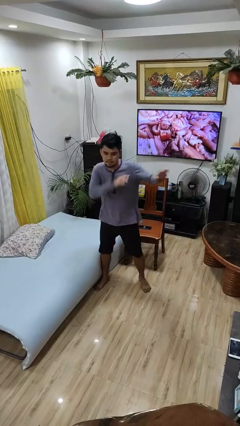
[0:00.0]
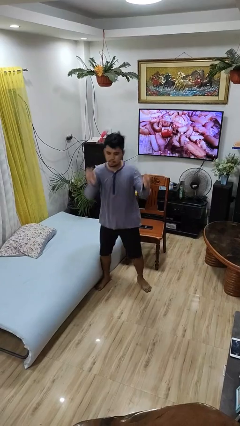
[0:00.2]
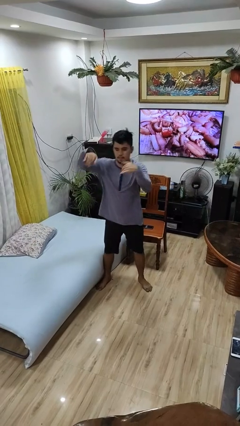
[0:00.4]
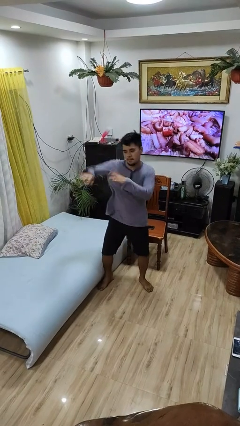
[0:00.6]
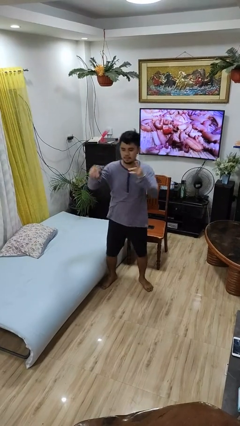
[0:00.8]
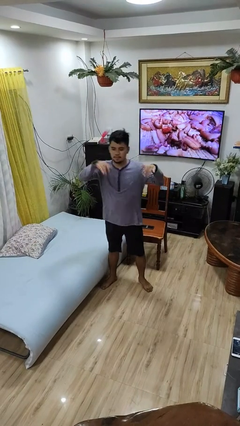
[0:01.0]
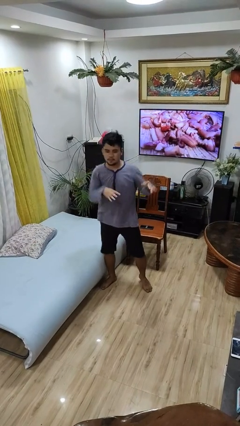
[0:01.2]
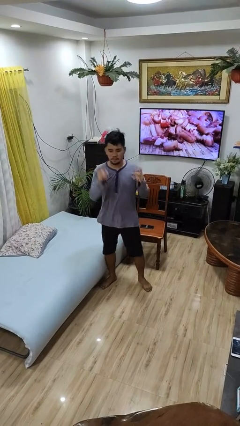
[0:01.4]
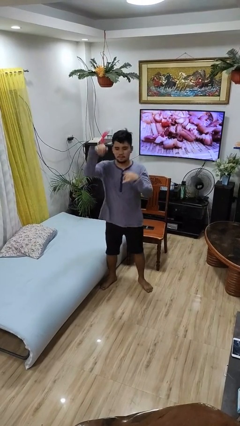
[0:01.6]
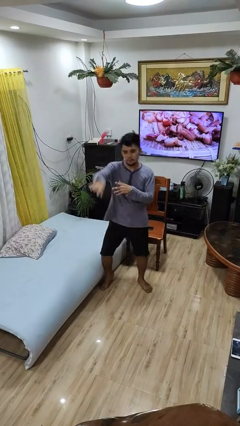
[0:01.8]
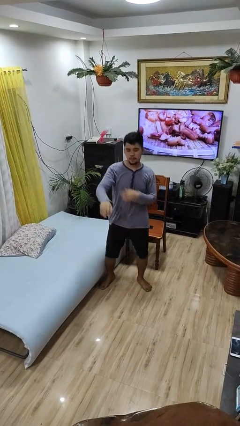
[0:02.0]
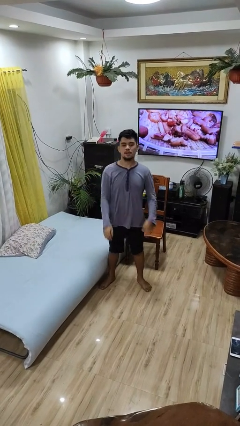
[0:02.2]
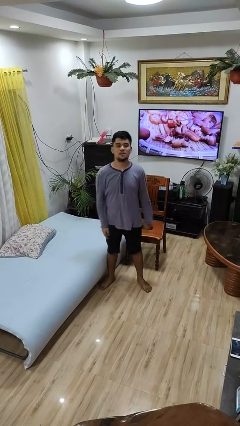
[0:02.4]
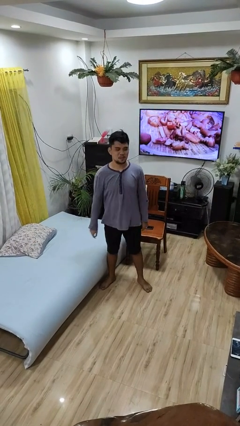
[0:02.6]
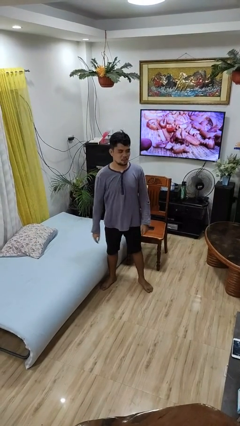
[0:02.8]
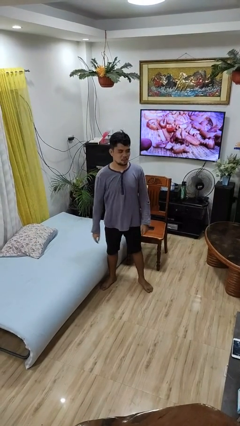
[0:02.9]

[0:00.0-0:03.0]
person dances in place

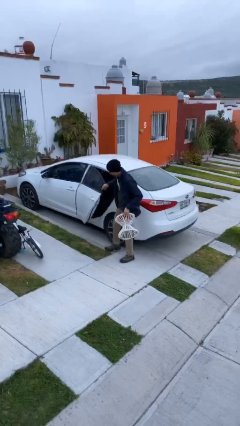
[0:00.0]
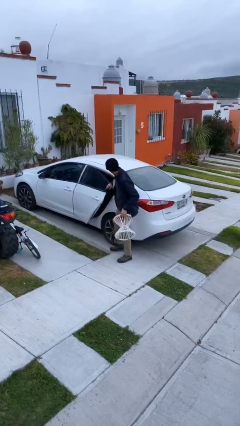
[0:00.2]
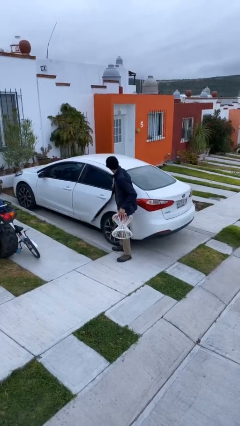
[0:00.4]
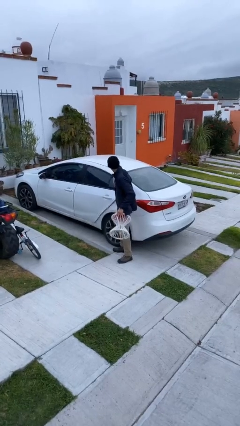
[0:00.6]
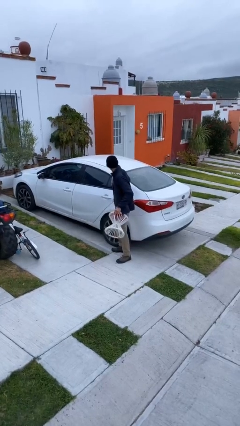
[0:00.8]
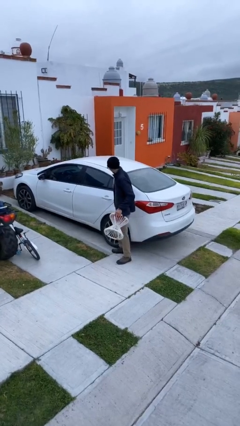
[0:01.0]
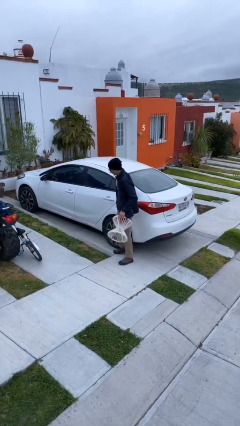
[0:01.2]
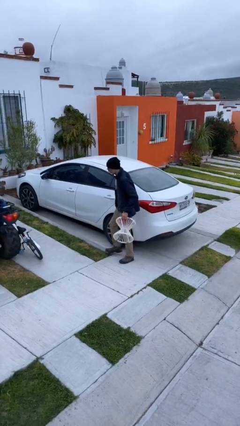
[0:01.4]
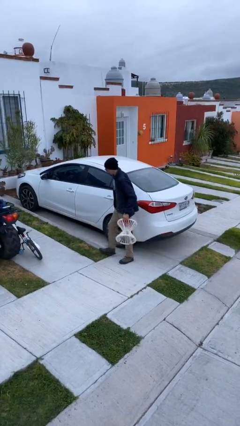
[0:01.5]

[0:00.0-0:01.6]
person closes car door

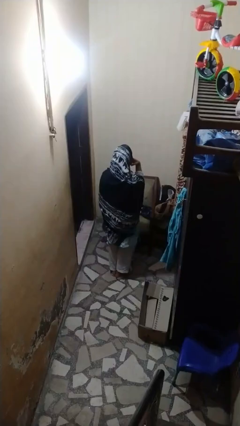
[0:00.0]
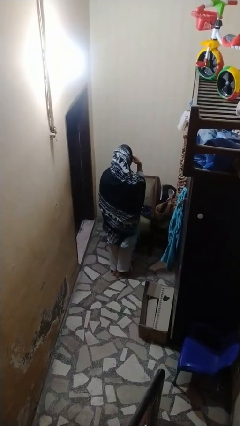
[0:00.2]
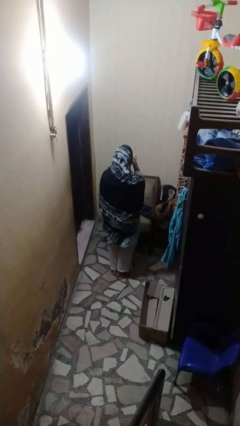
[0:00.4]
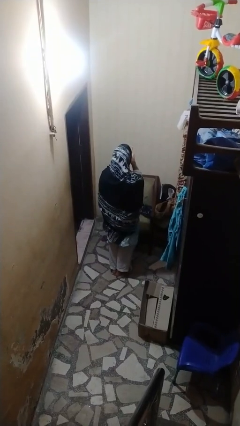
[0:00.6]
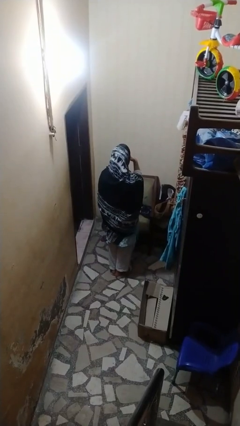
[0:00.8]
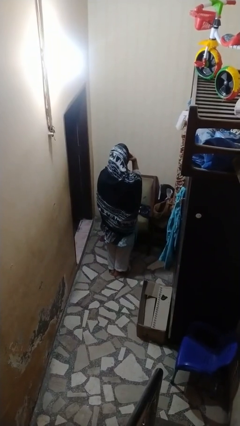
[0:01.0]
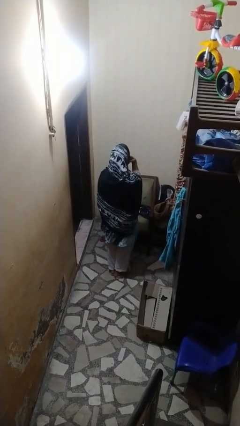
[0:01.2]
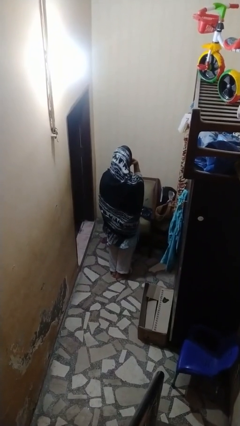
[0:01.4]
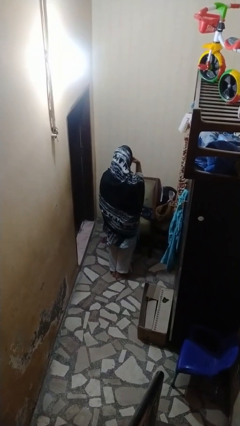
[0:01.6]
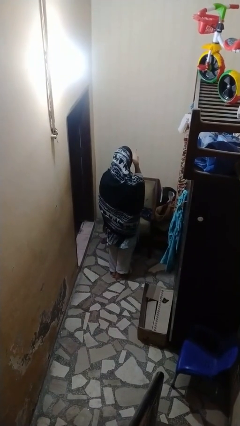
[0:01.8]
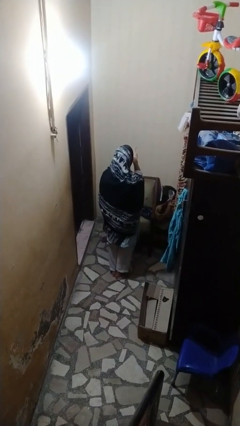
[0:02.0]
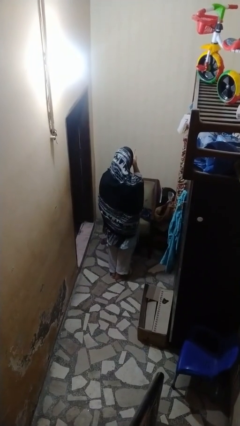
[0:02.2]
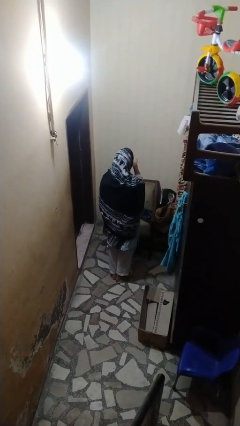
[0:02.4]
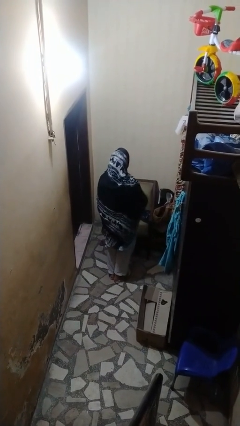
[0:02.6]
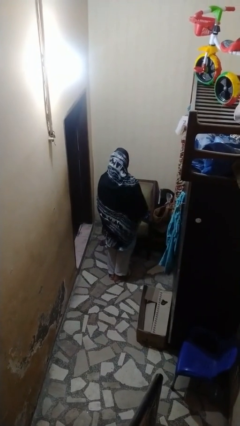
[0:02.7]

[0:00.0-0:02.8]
person gestures watch closely

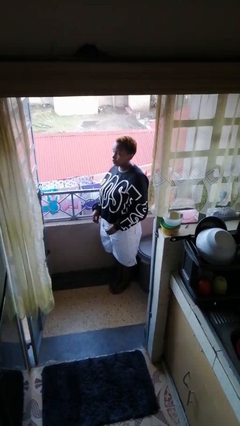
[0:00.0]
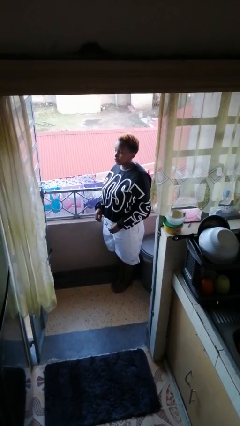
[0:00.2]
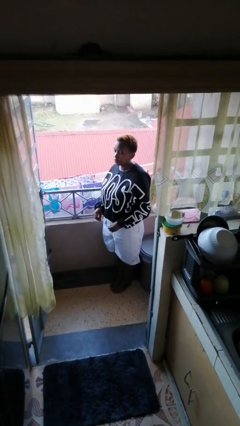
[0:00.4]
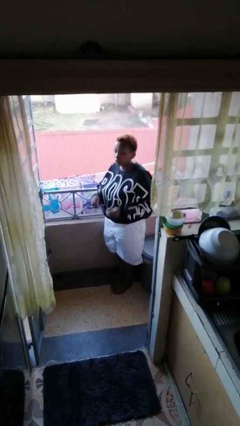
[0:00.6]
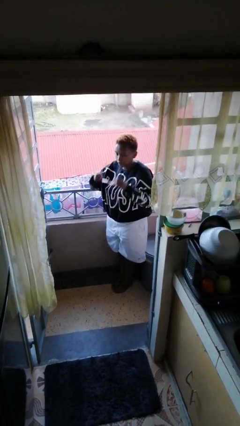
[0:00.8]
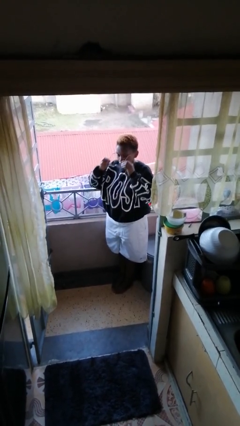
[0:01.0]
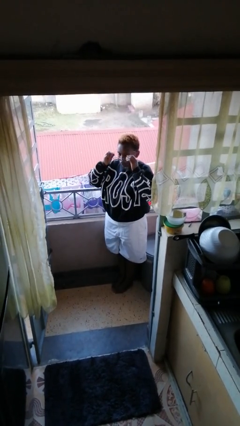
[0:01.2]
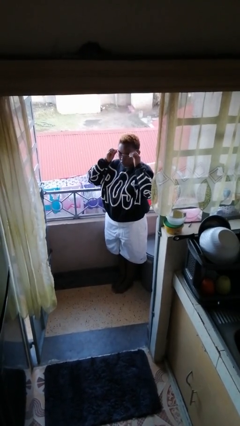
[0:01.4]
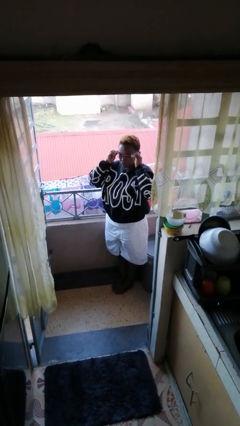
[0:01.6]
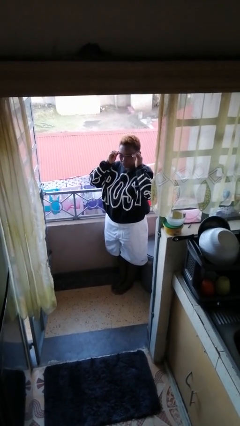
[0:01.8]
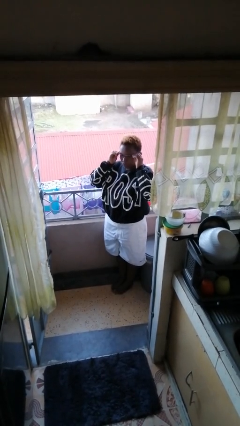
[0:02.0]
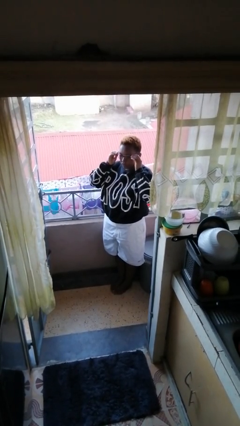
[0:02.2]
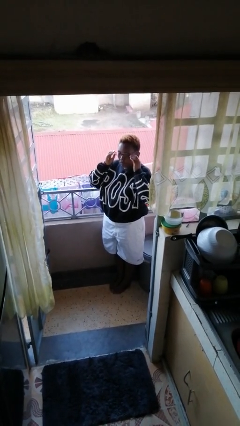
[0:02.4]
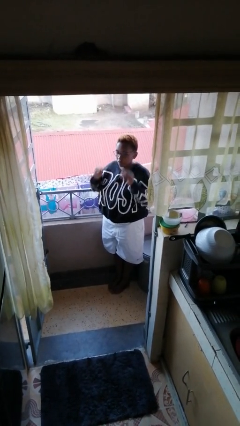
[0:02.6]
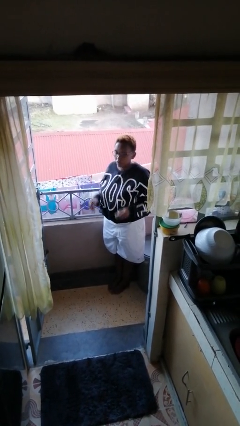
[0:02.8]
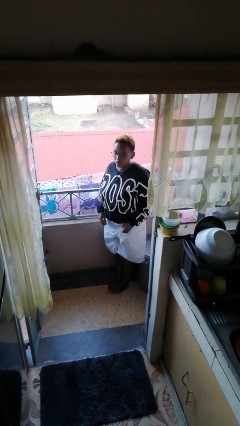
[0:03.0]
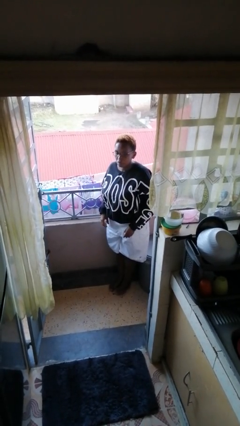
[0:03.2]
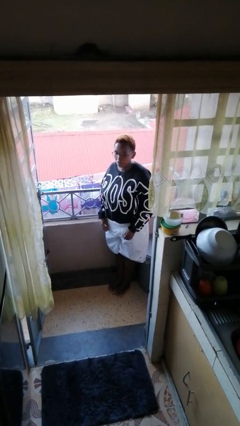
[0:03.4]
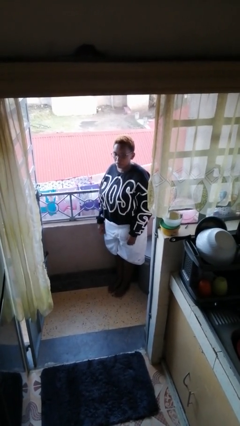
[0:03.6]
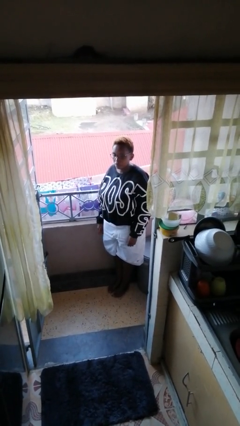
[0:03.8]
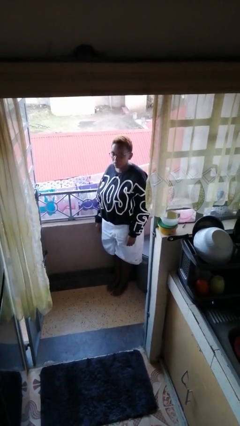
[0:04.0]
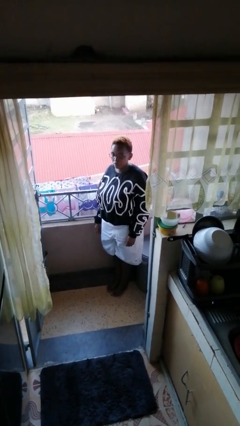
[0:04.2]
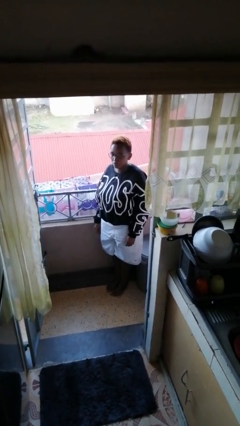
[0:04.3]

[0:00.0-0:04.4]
person puts on glasses

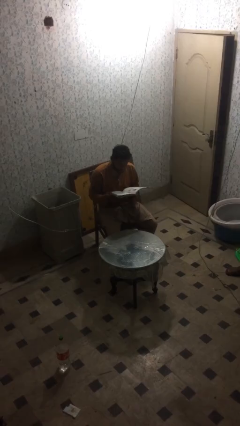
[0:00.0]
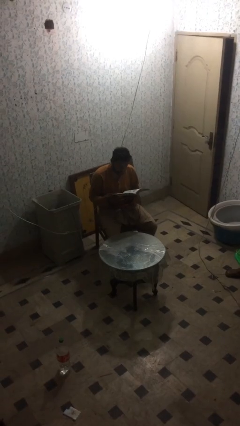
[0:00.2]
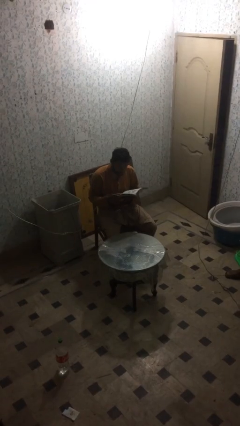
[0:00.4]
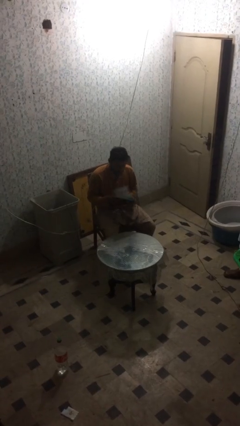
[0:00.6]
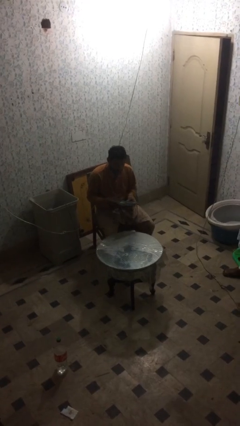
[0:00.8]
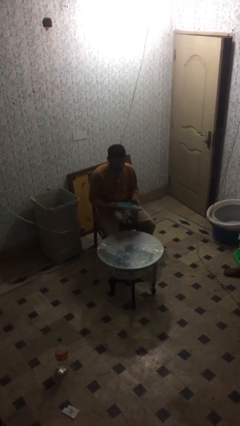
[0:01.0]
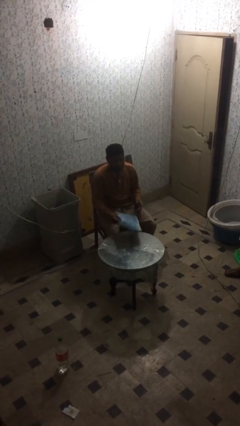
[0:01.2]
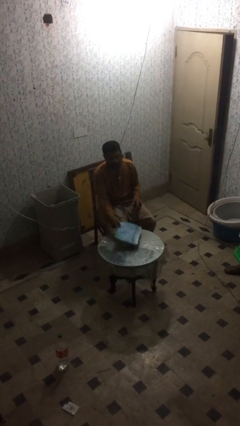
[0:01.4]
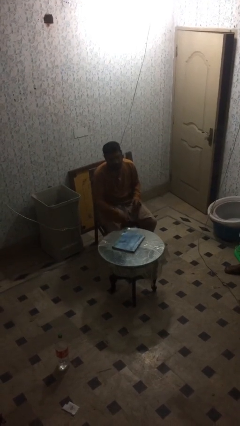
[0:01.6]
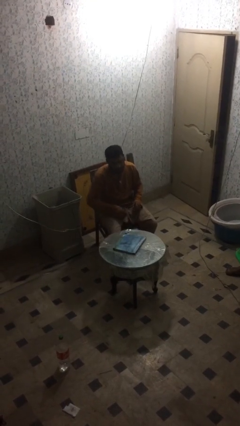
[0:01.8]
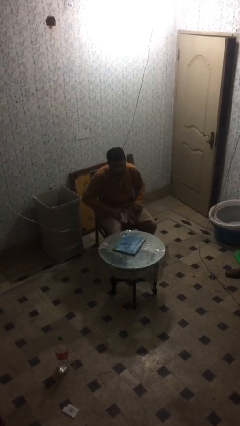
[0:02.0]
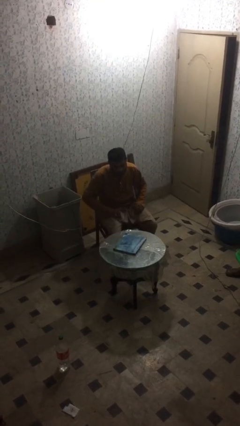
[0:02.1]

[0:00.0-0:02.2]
person puts down object on table

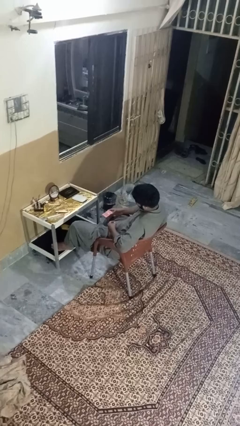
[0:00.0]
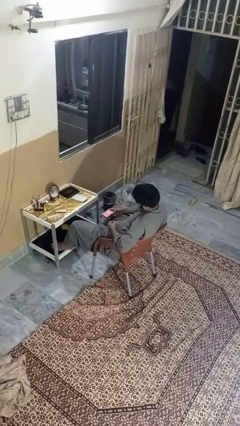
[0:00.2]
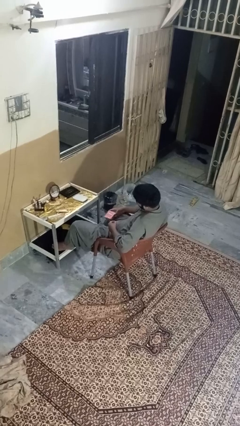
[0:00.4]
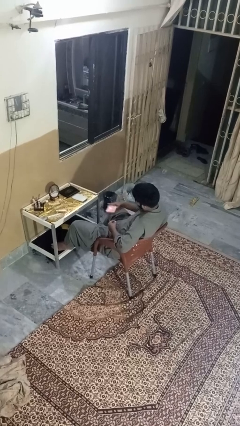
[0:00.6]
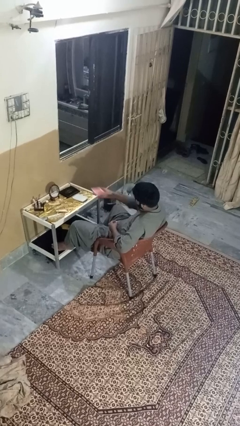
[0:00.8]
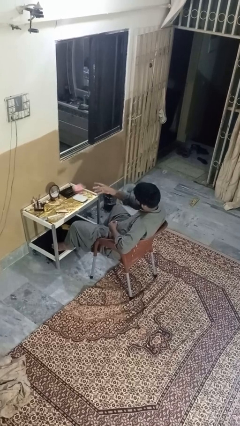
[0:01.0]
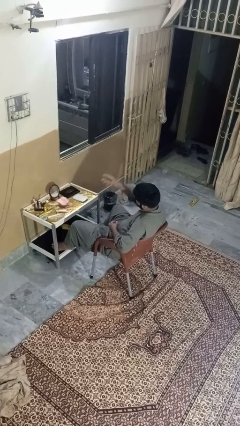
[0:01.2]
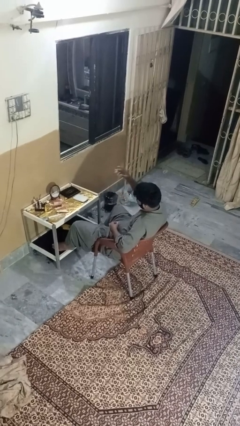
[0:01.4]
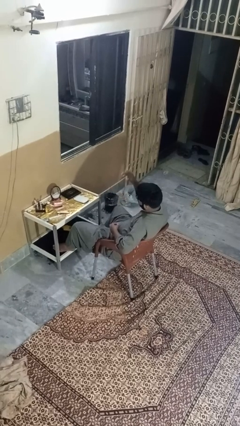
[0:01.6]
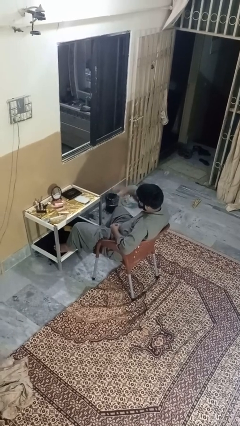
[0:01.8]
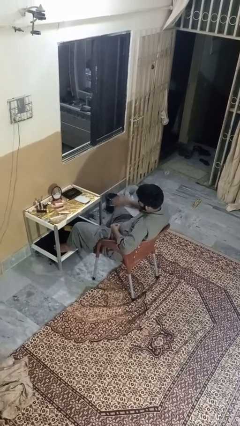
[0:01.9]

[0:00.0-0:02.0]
person throws object on table

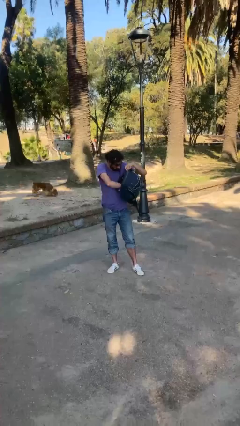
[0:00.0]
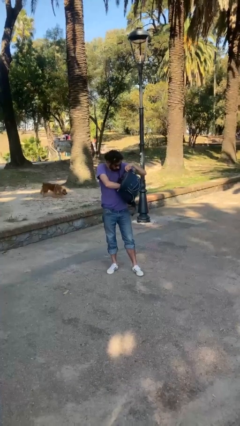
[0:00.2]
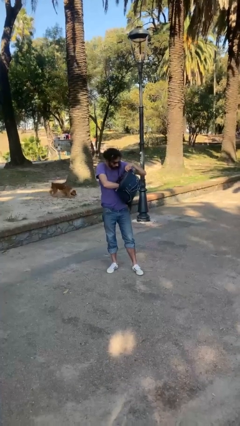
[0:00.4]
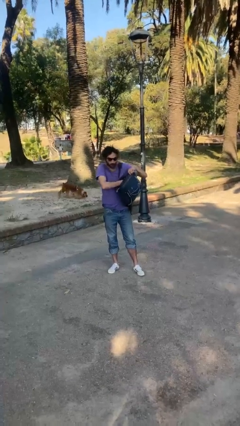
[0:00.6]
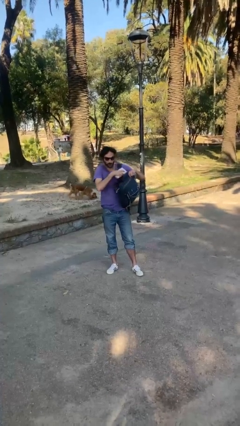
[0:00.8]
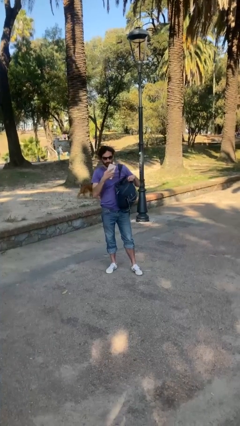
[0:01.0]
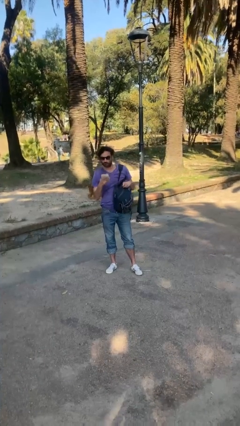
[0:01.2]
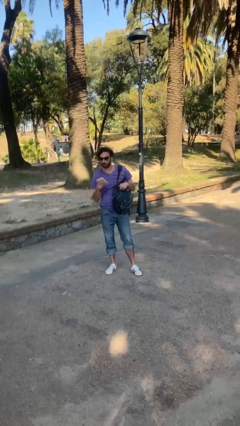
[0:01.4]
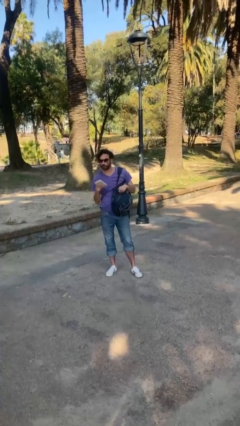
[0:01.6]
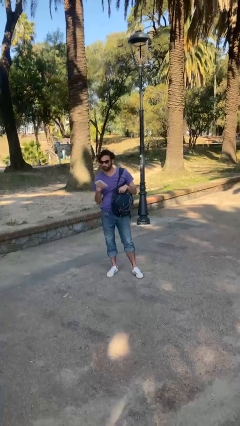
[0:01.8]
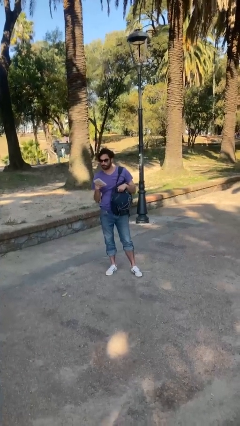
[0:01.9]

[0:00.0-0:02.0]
person takes object from backpack
